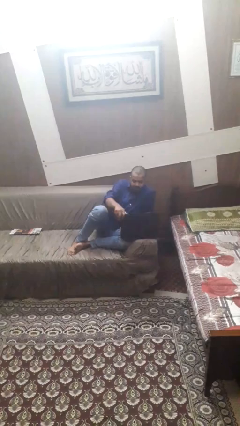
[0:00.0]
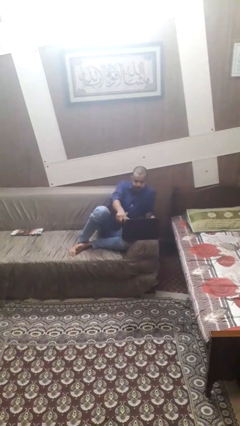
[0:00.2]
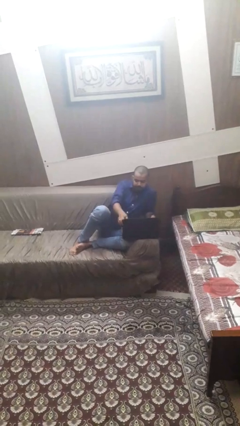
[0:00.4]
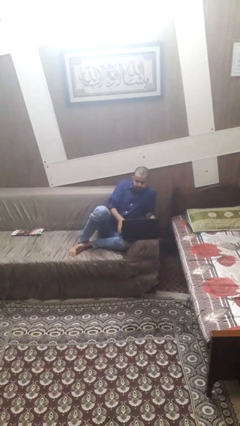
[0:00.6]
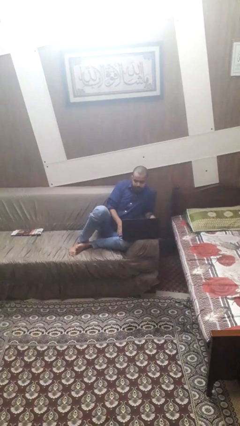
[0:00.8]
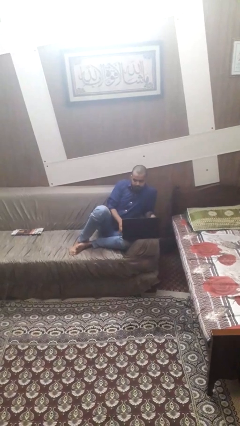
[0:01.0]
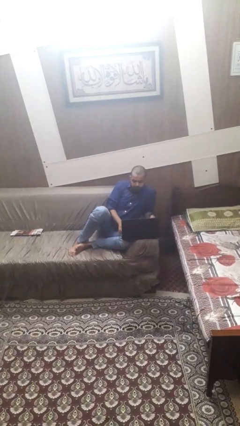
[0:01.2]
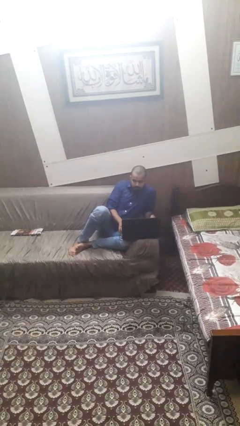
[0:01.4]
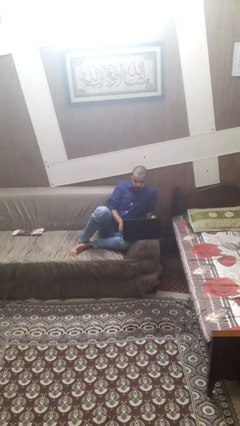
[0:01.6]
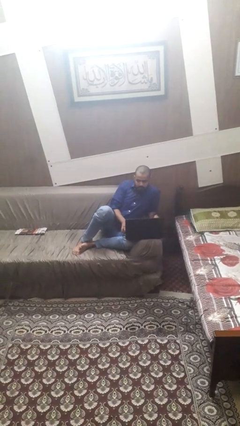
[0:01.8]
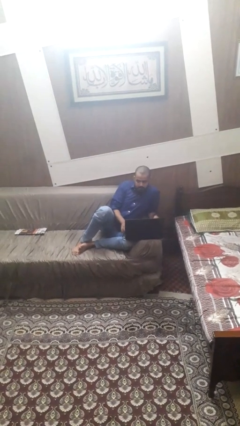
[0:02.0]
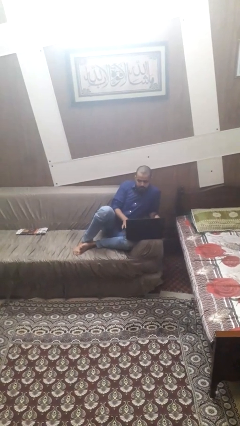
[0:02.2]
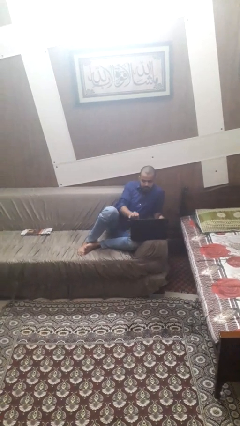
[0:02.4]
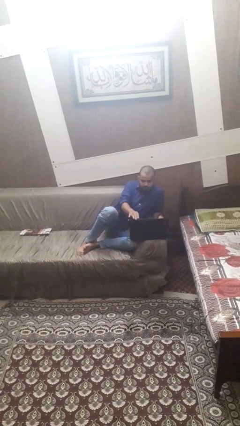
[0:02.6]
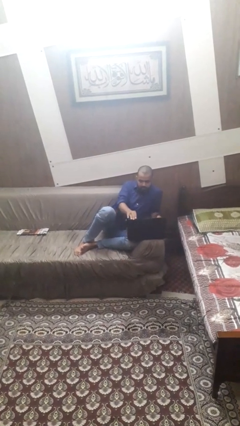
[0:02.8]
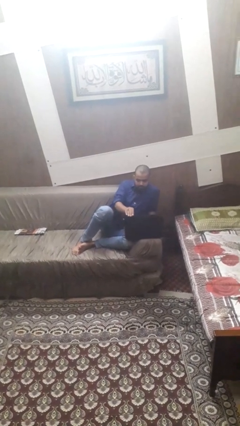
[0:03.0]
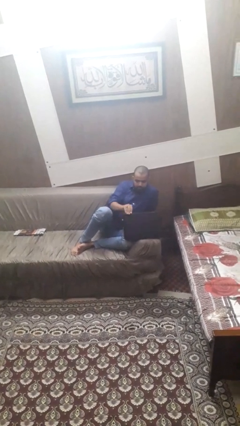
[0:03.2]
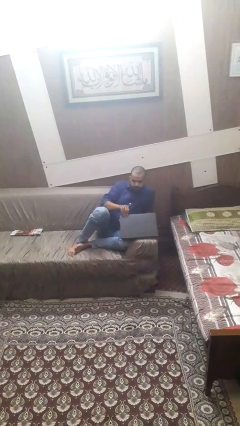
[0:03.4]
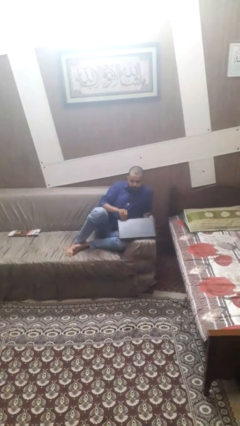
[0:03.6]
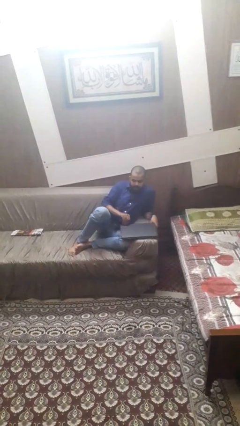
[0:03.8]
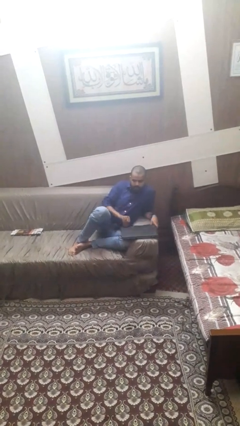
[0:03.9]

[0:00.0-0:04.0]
person opens laptop

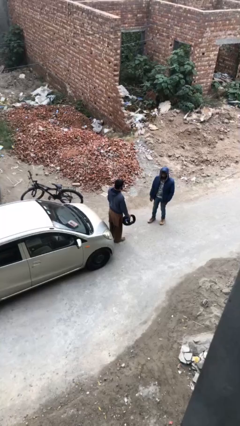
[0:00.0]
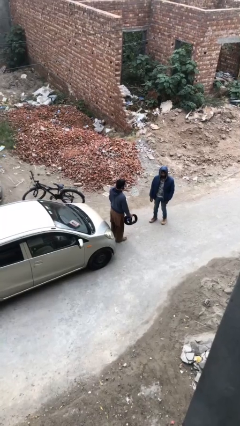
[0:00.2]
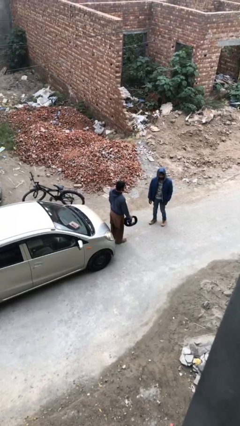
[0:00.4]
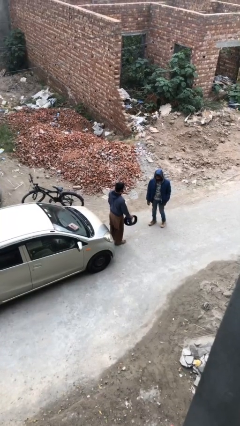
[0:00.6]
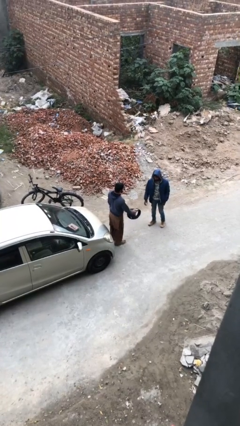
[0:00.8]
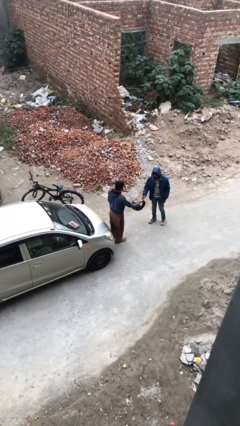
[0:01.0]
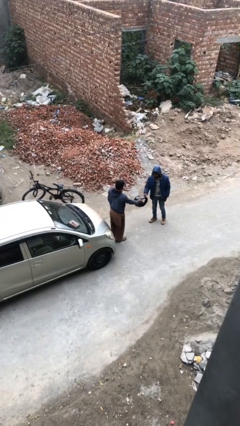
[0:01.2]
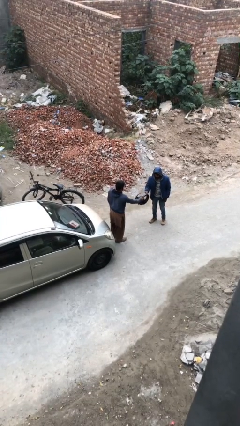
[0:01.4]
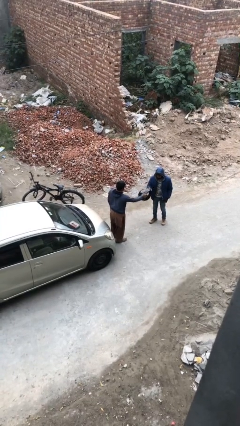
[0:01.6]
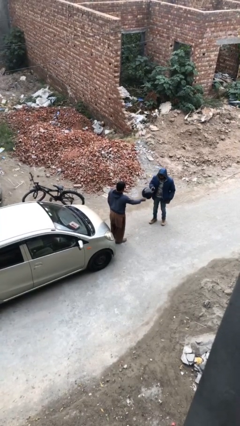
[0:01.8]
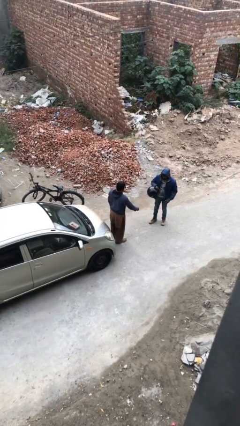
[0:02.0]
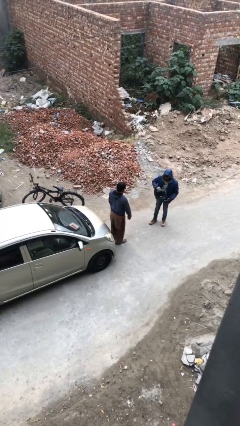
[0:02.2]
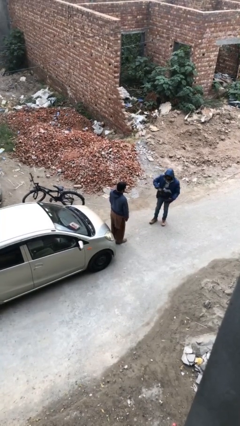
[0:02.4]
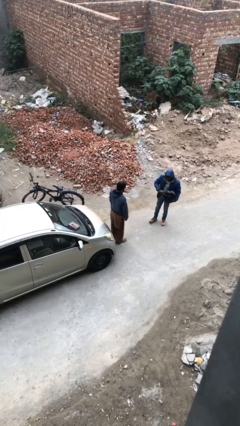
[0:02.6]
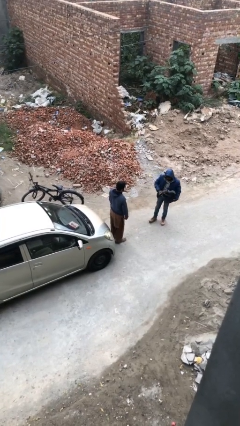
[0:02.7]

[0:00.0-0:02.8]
person transfers object to person

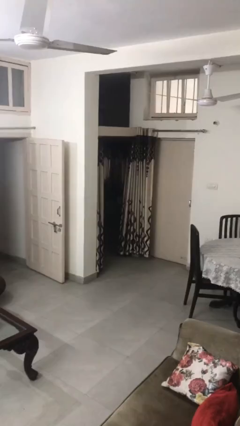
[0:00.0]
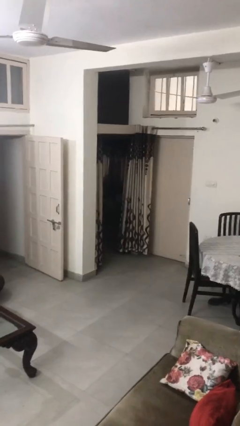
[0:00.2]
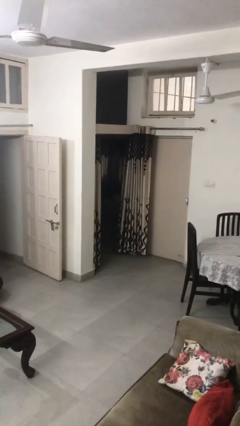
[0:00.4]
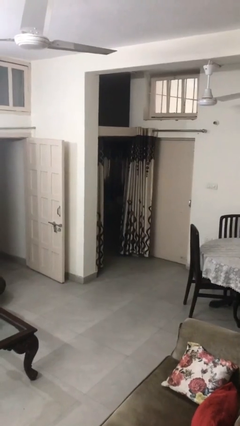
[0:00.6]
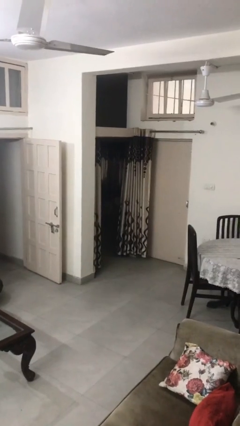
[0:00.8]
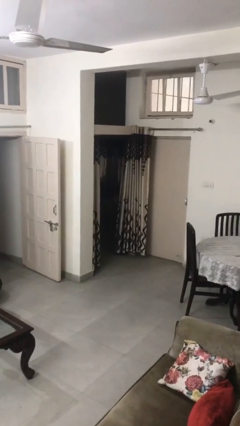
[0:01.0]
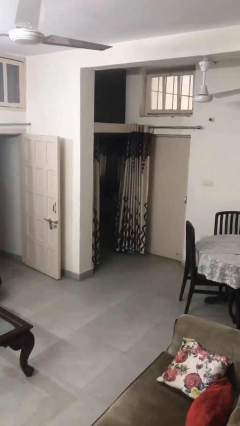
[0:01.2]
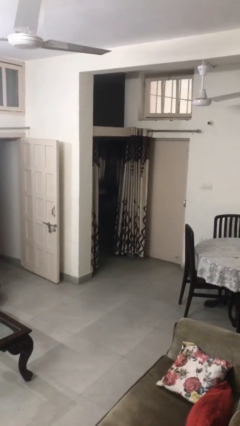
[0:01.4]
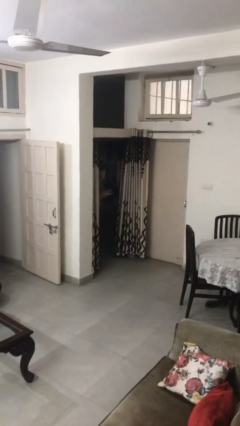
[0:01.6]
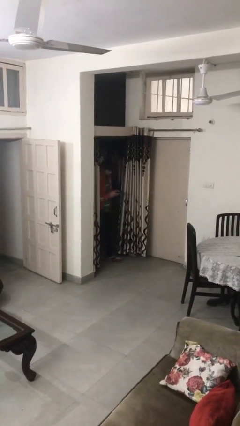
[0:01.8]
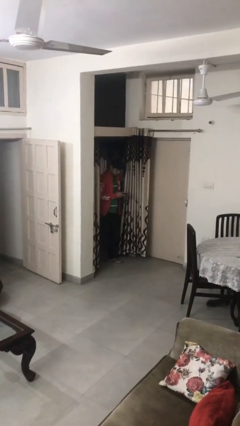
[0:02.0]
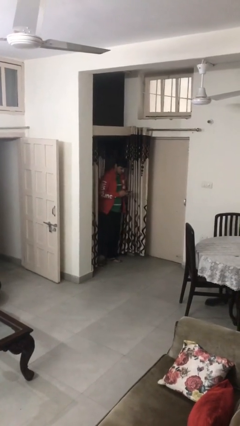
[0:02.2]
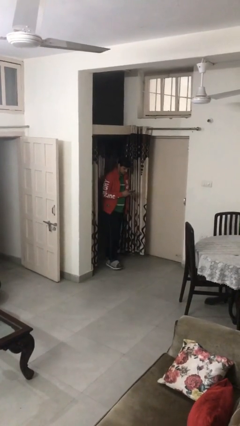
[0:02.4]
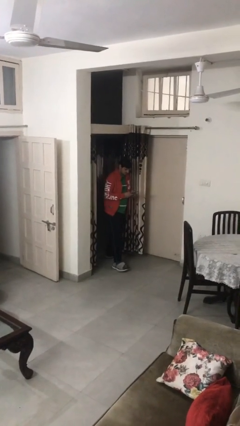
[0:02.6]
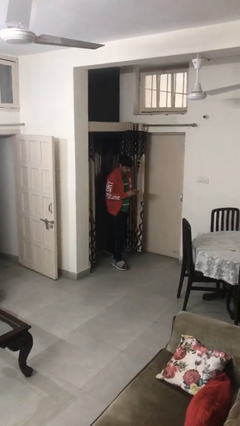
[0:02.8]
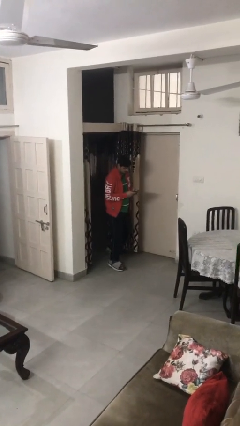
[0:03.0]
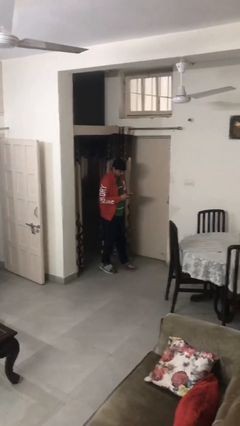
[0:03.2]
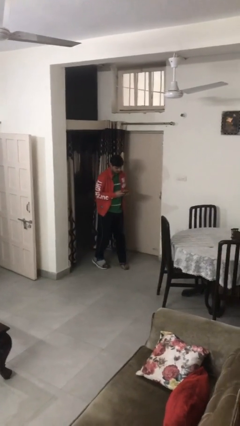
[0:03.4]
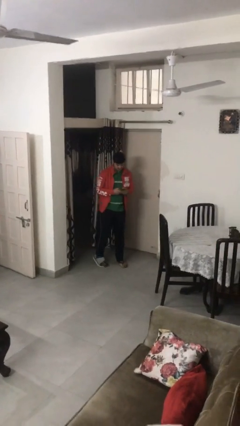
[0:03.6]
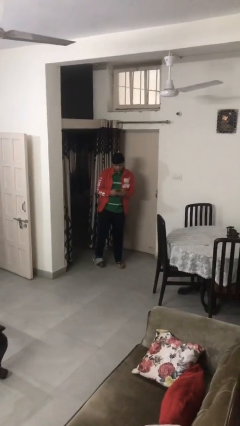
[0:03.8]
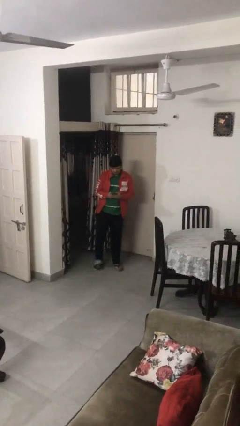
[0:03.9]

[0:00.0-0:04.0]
person enters scene through structure

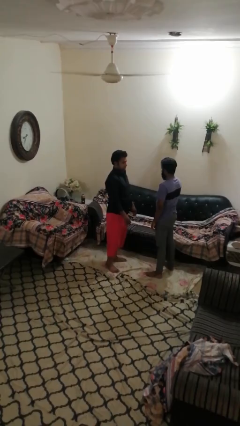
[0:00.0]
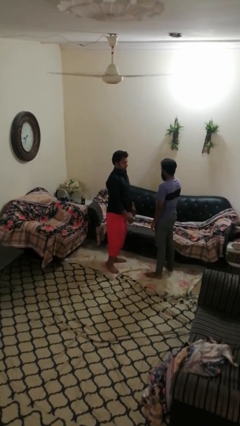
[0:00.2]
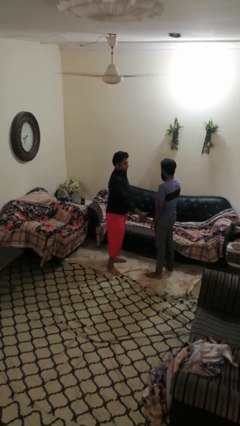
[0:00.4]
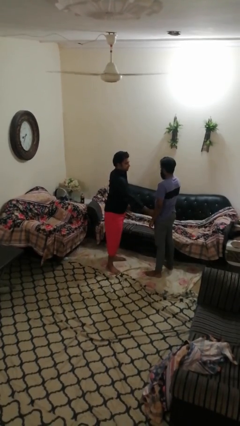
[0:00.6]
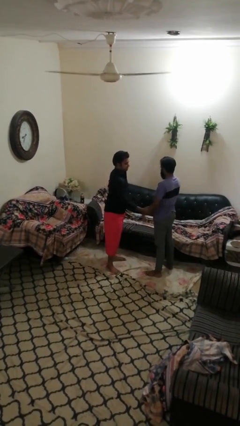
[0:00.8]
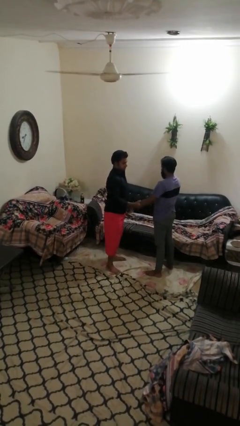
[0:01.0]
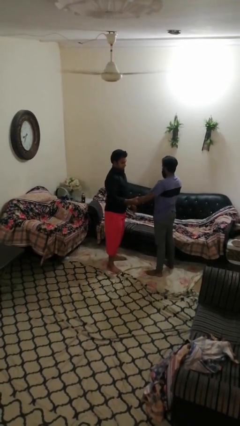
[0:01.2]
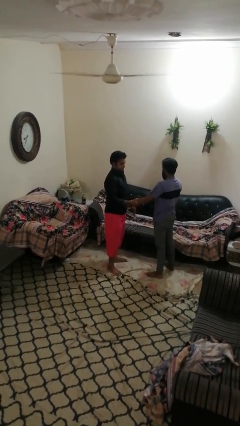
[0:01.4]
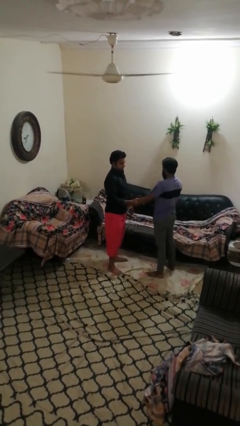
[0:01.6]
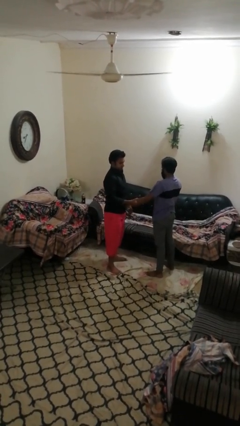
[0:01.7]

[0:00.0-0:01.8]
person grabs person by forearm

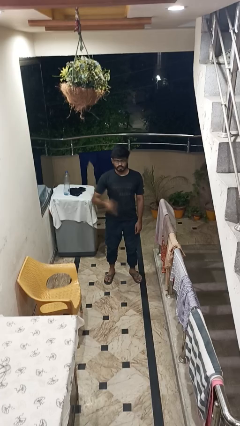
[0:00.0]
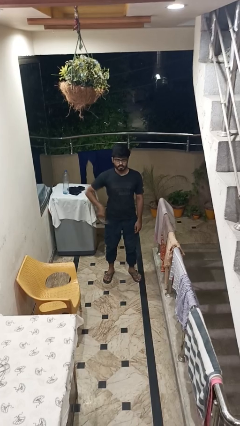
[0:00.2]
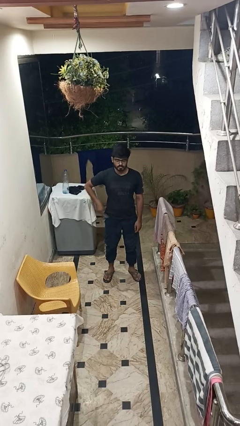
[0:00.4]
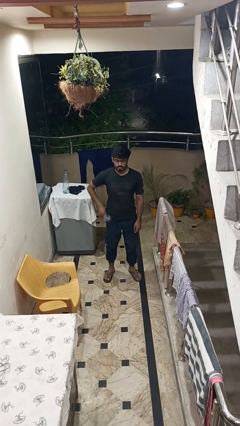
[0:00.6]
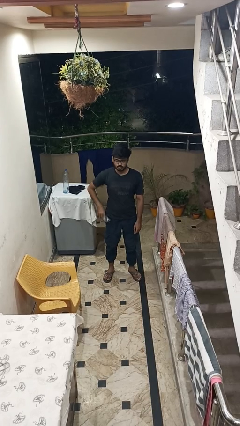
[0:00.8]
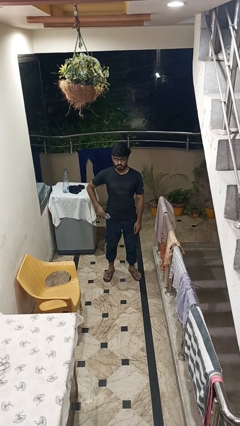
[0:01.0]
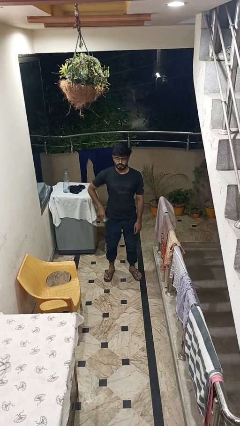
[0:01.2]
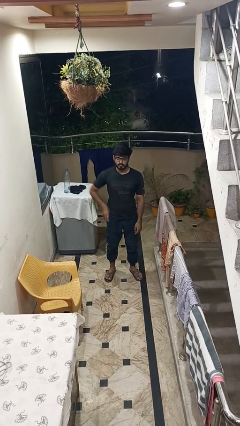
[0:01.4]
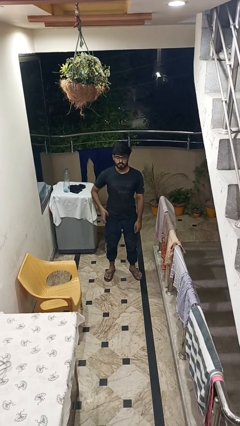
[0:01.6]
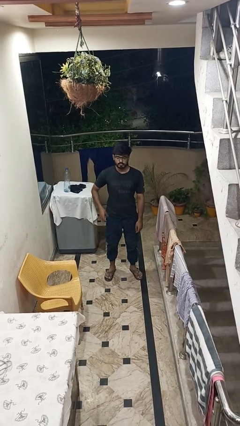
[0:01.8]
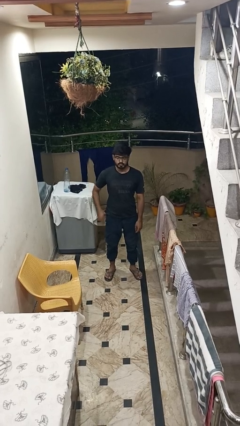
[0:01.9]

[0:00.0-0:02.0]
person puts phone into pocket

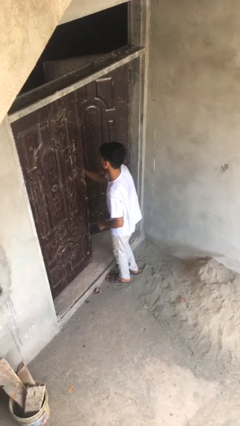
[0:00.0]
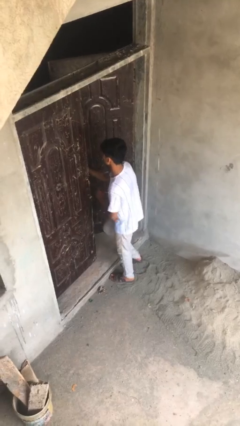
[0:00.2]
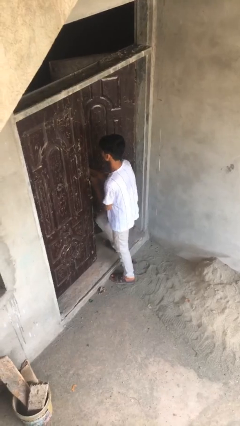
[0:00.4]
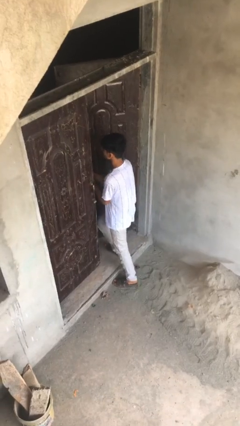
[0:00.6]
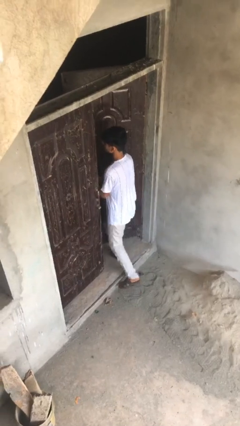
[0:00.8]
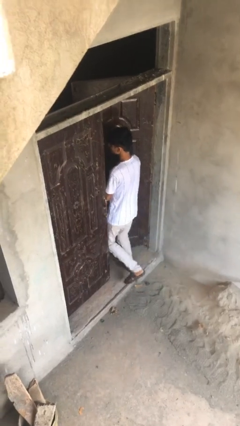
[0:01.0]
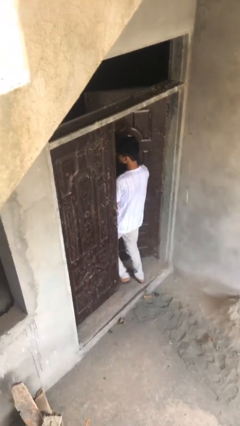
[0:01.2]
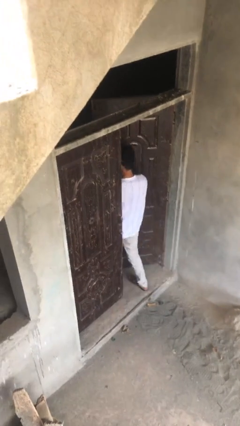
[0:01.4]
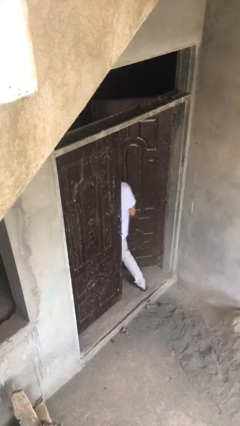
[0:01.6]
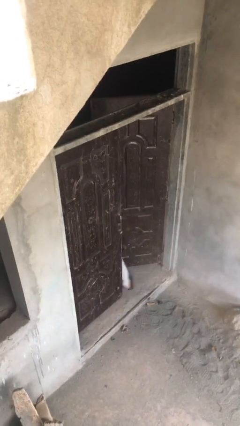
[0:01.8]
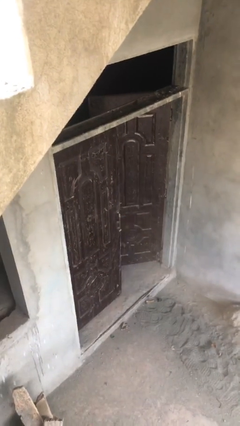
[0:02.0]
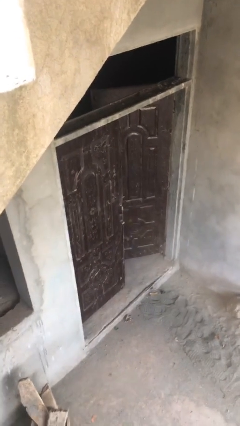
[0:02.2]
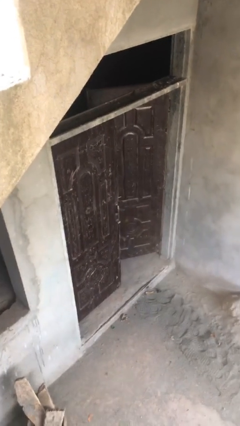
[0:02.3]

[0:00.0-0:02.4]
person exits scene through structure

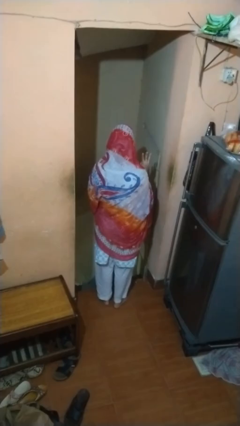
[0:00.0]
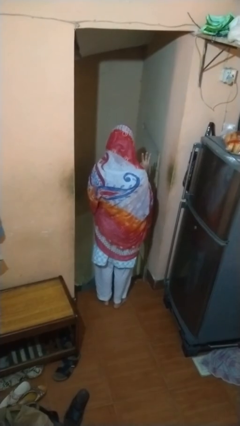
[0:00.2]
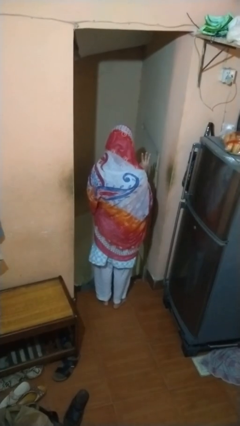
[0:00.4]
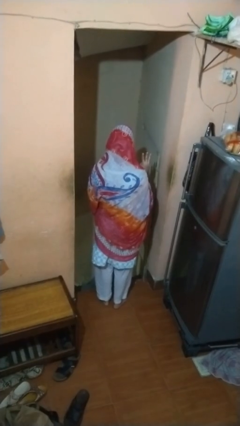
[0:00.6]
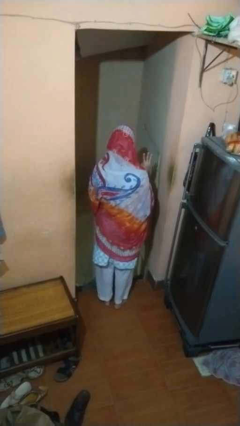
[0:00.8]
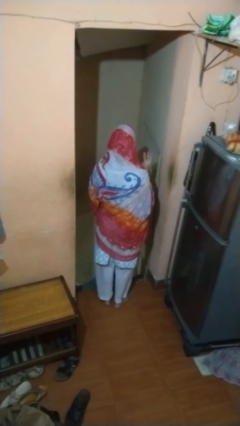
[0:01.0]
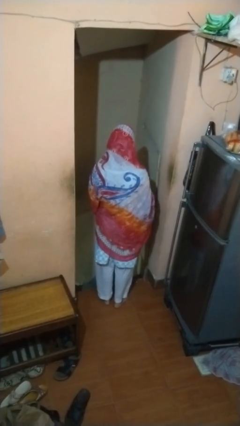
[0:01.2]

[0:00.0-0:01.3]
person gestures number three
